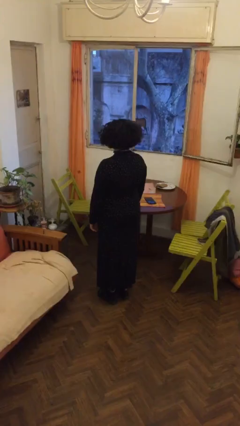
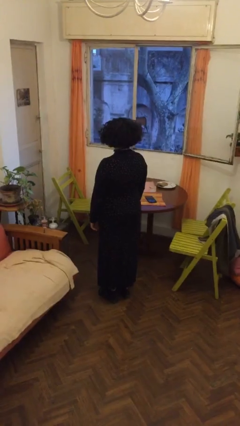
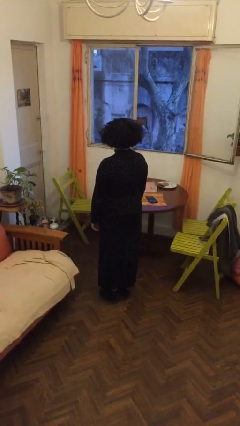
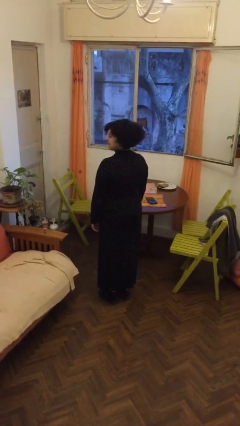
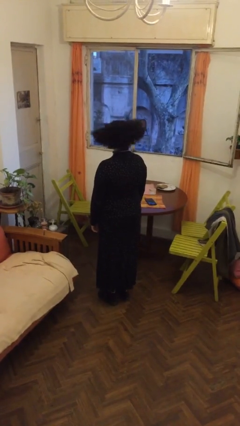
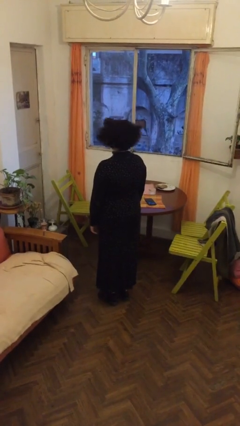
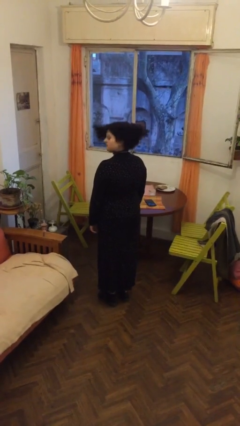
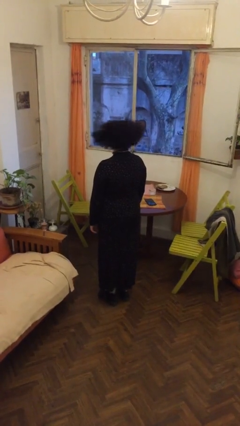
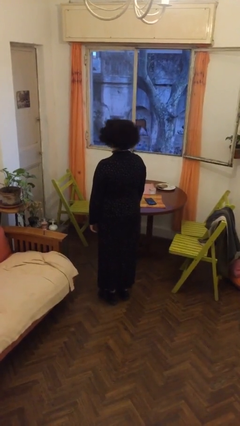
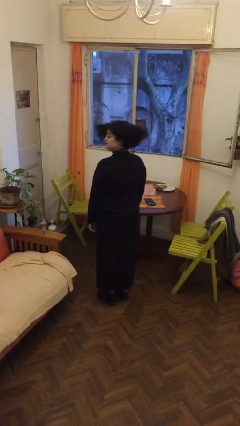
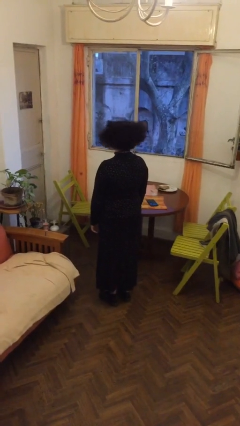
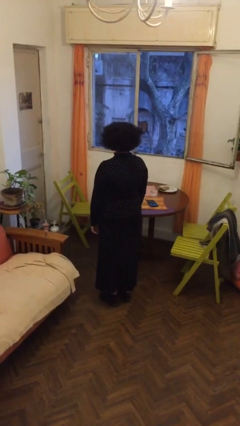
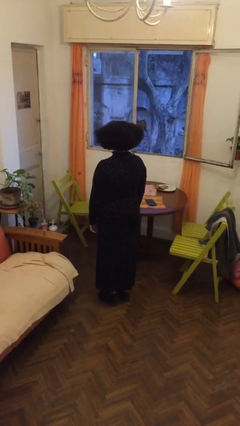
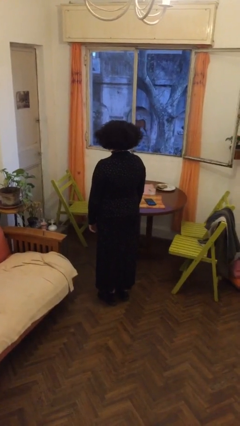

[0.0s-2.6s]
person shakes head

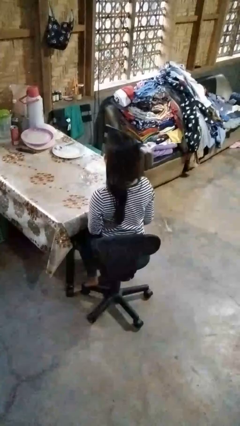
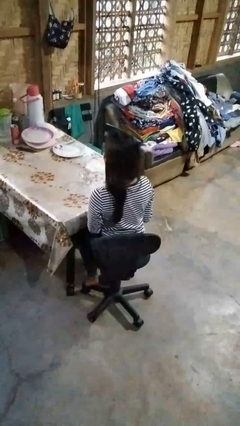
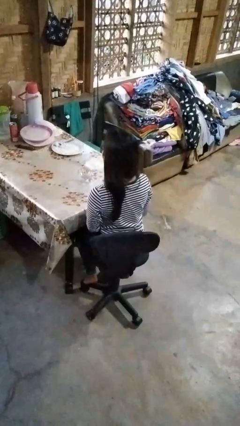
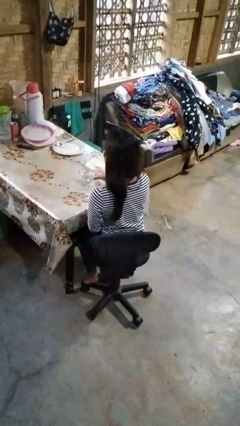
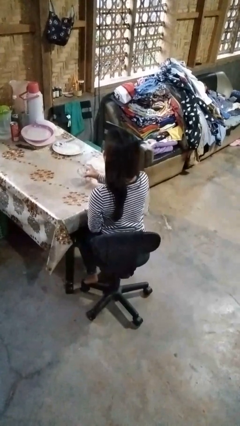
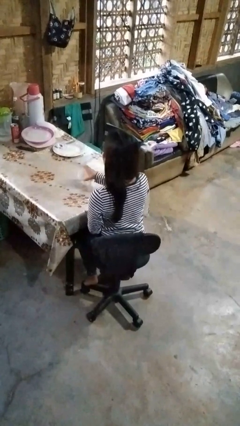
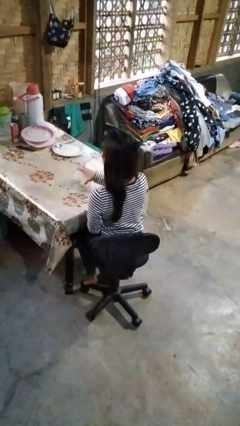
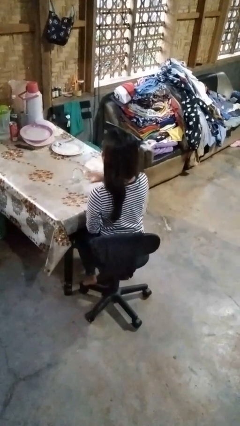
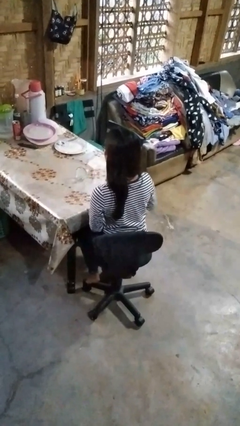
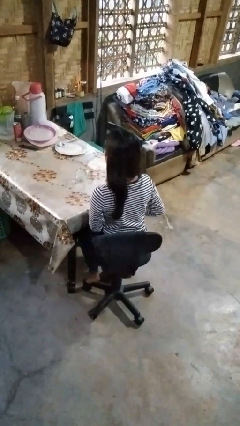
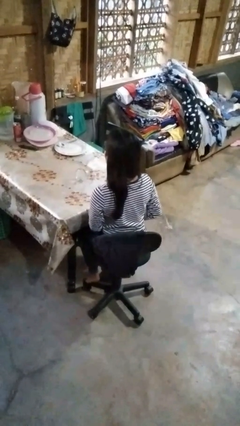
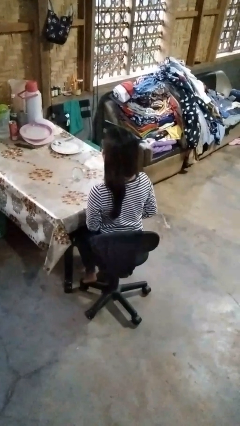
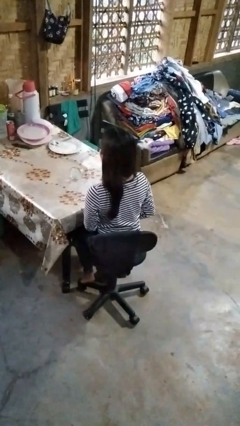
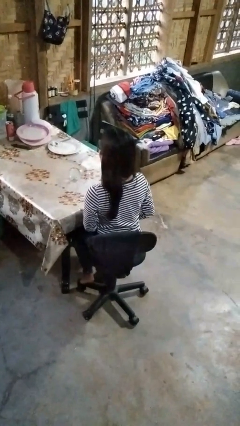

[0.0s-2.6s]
person knocks over glass

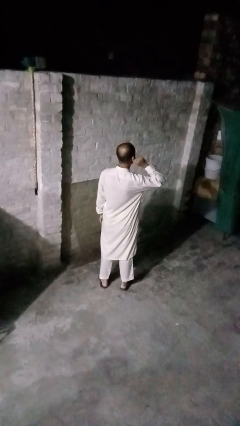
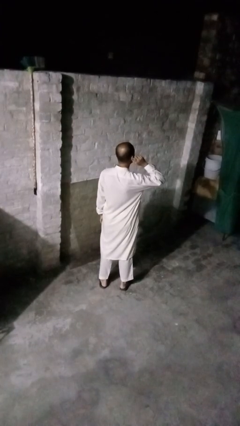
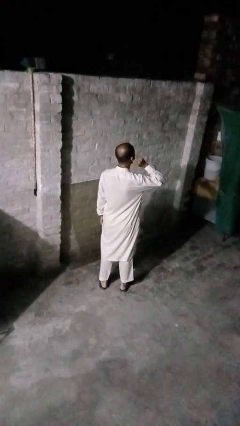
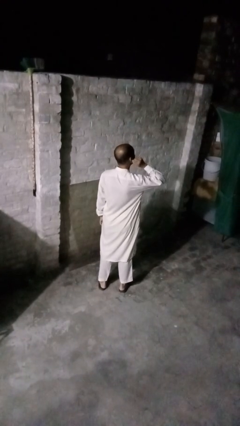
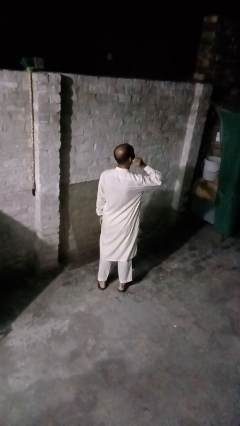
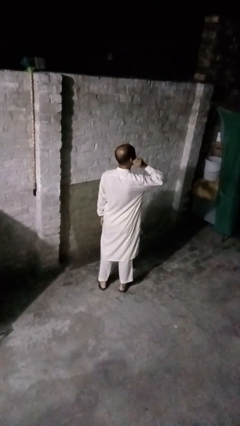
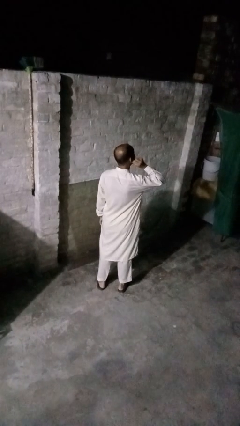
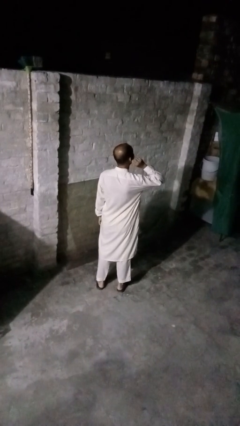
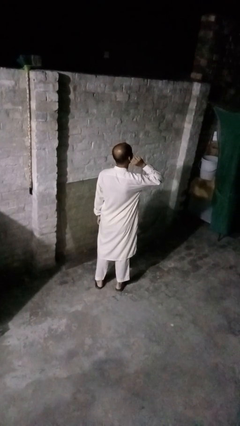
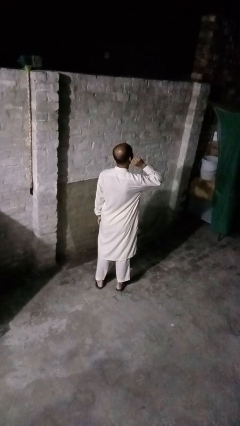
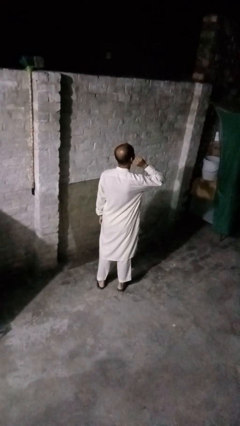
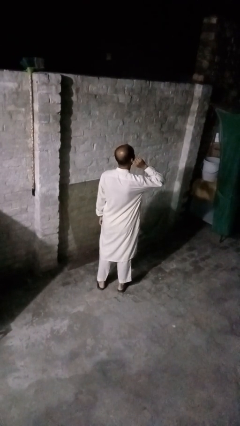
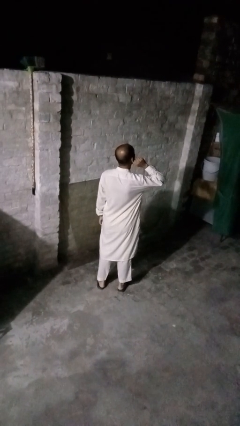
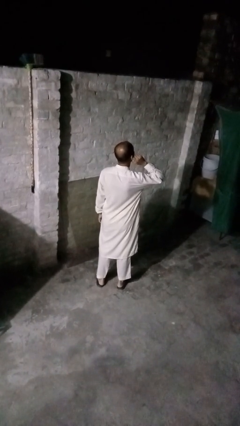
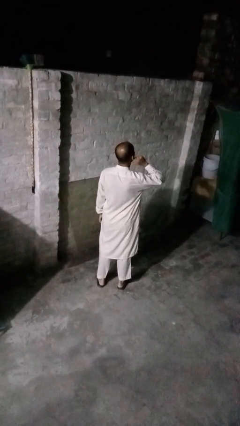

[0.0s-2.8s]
person touches earlobe

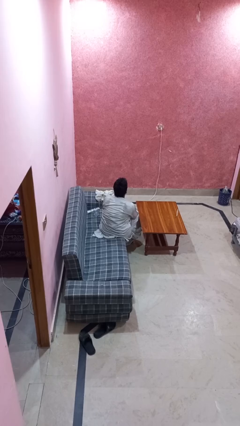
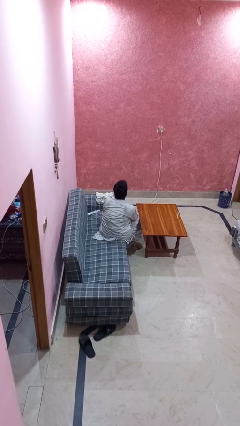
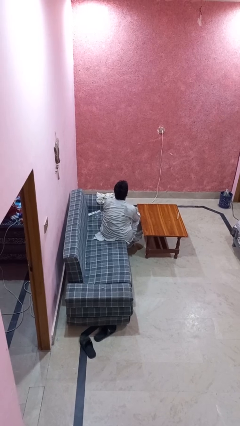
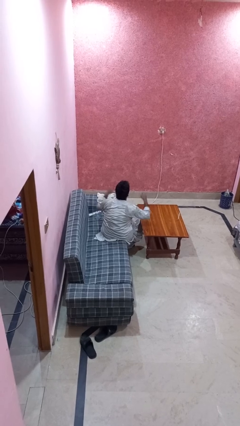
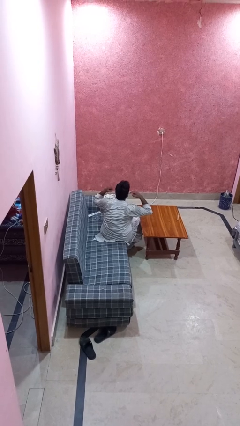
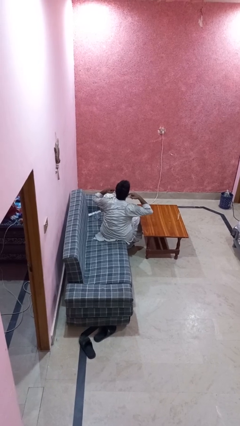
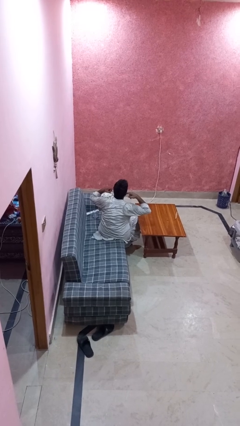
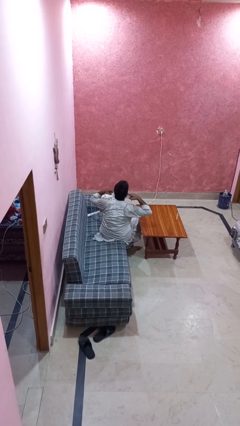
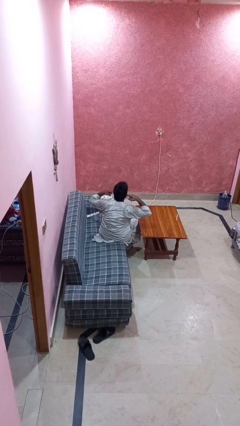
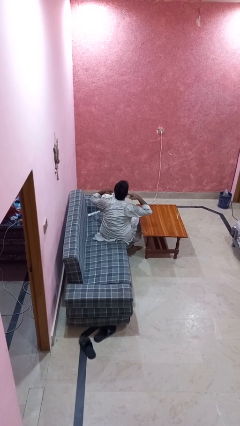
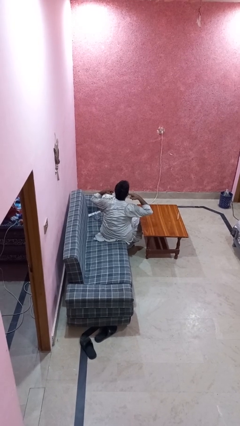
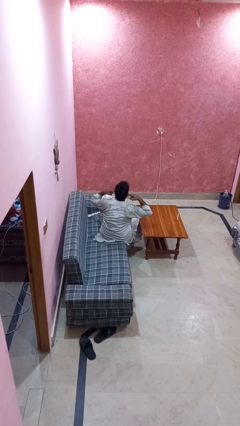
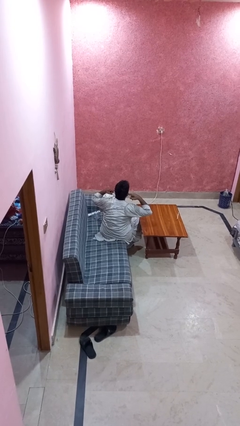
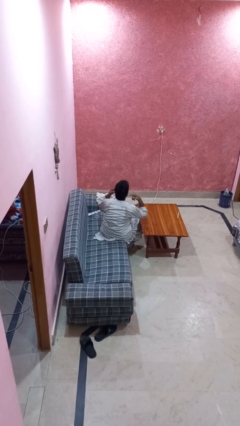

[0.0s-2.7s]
person puts fingers in ear

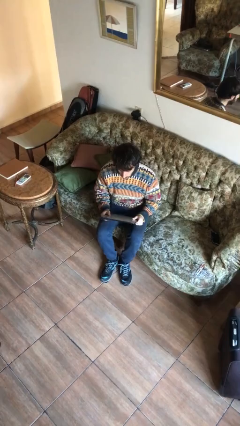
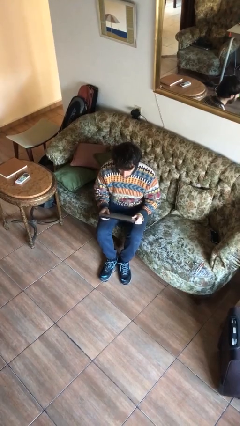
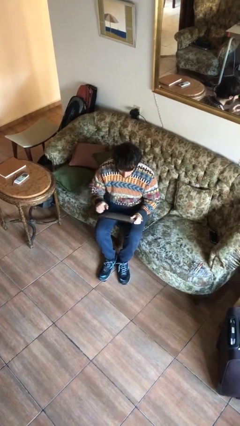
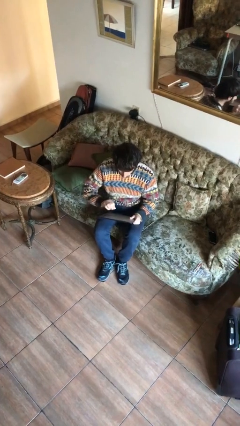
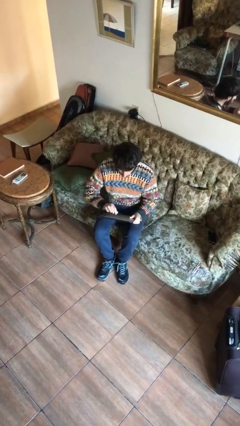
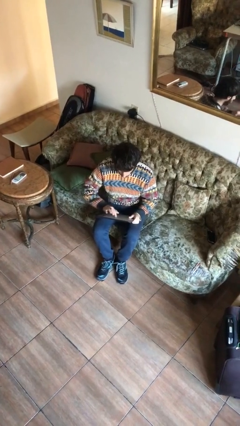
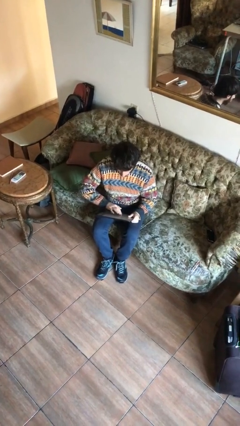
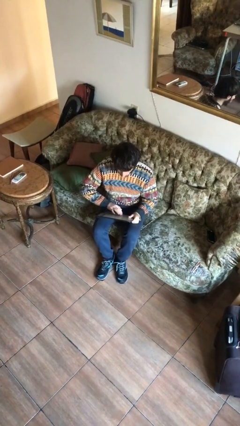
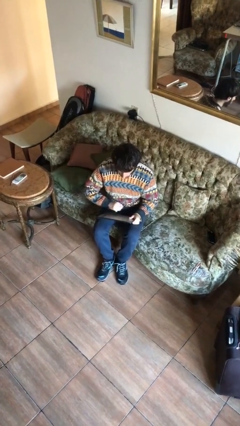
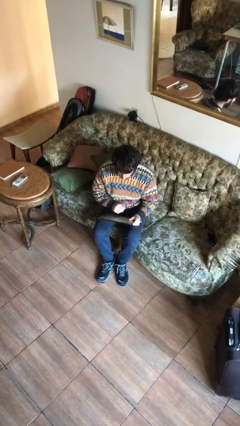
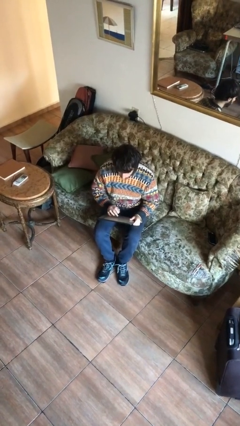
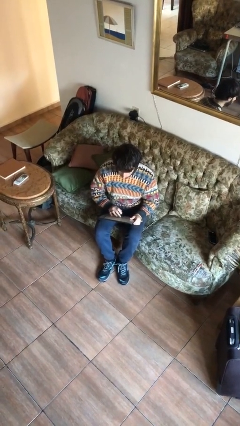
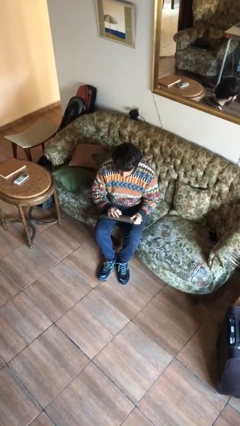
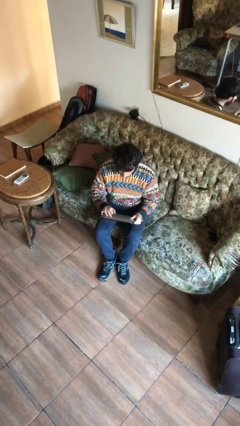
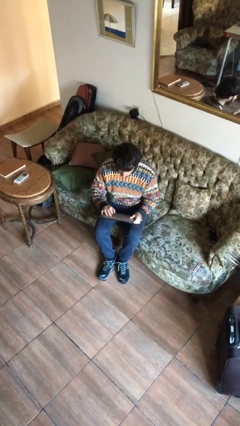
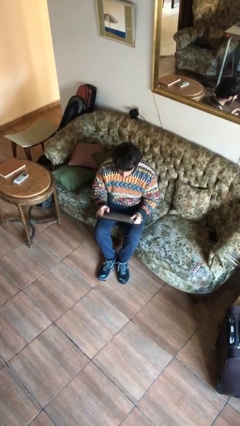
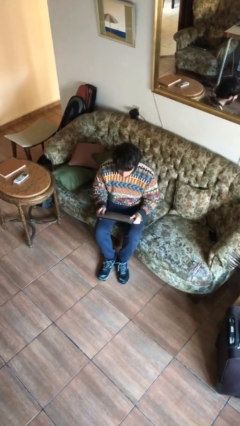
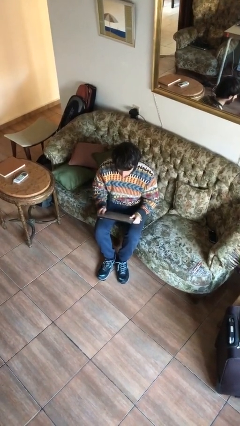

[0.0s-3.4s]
person interacts with tablet

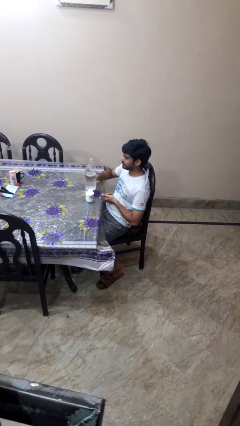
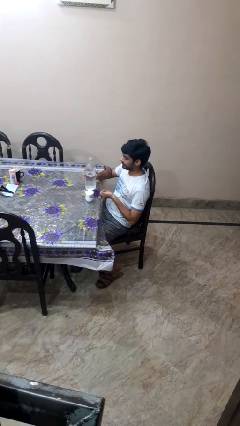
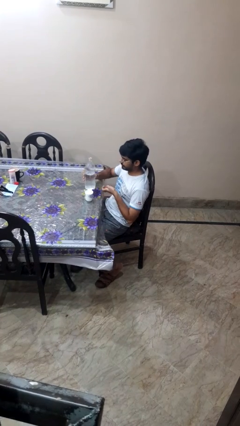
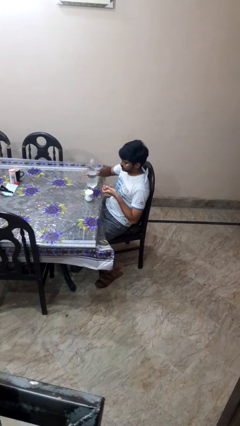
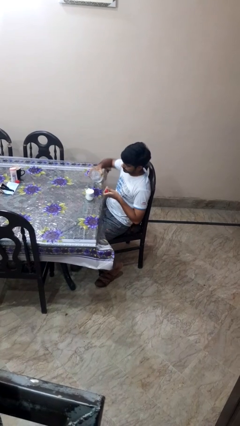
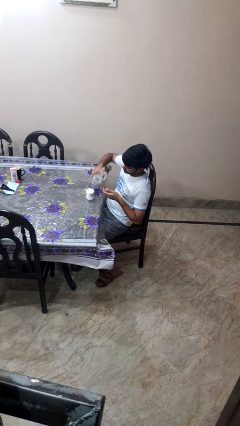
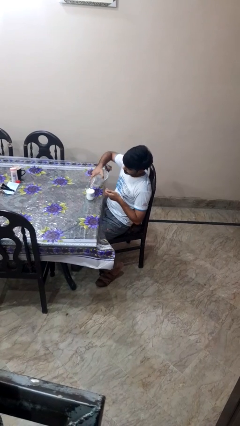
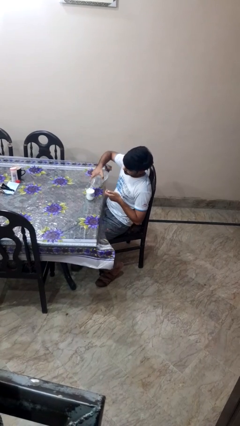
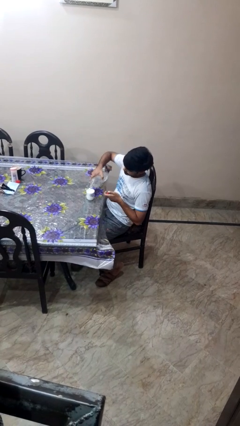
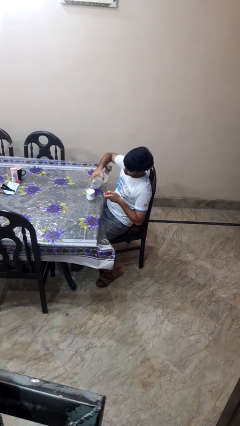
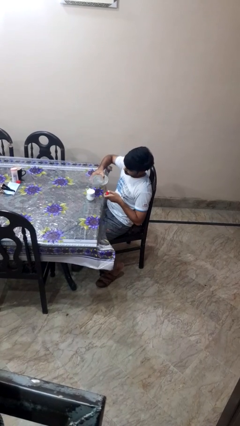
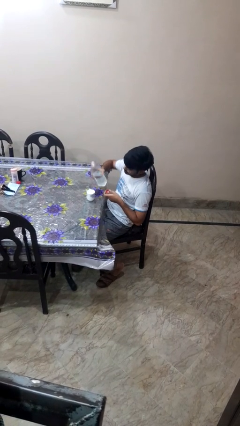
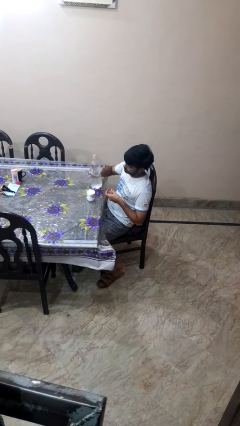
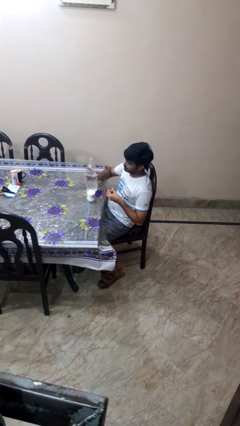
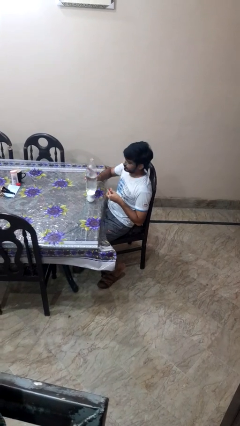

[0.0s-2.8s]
person pours liquid into cup
